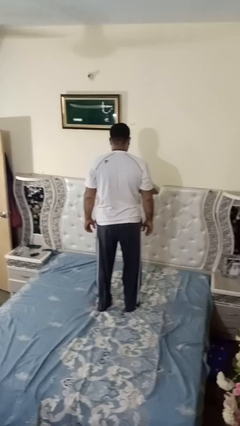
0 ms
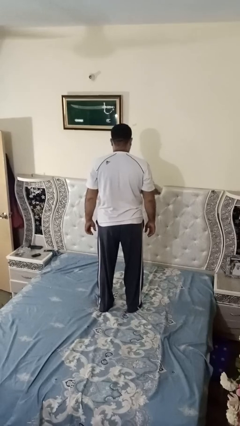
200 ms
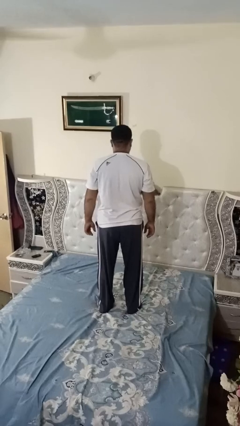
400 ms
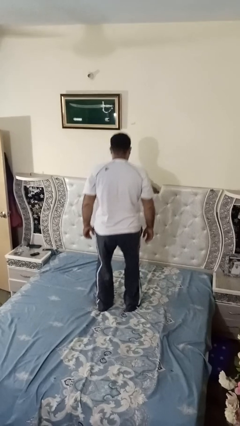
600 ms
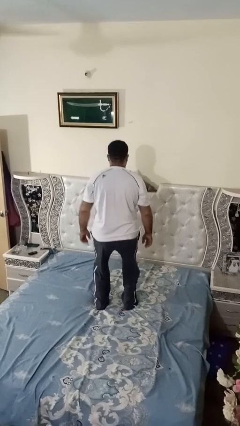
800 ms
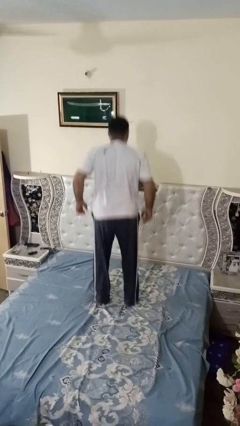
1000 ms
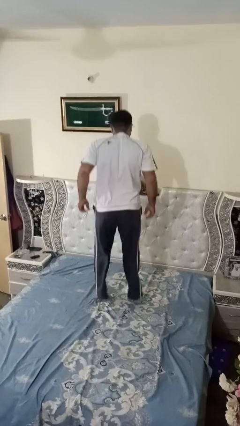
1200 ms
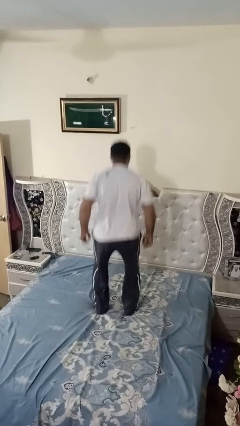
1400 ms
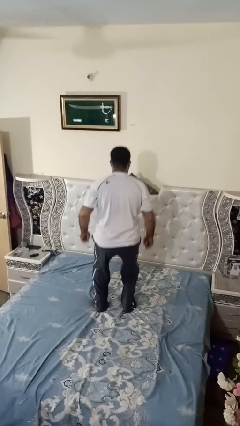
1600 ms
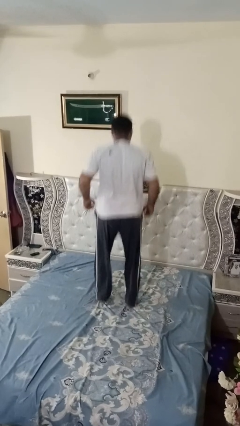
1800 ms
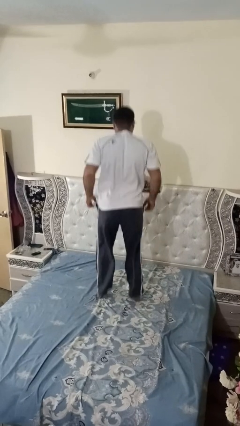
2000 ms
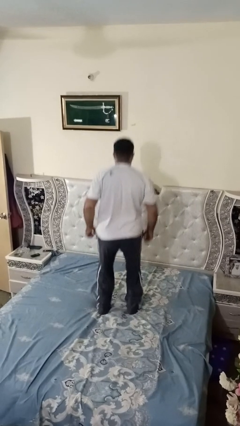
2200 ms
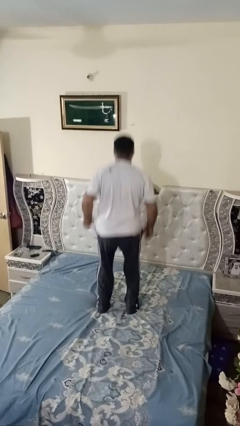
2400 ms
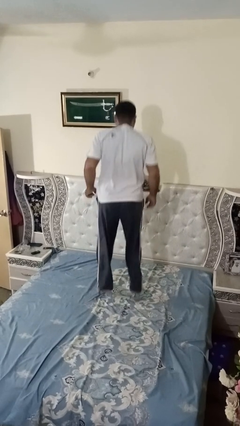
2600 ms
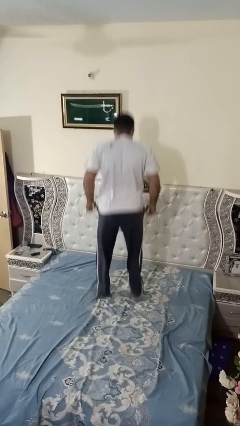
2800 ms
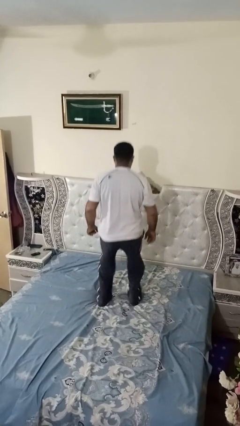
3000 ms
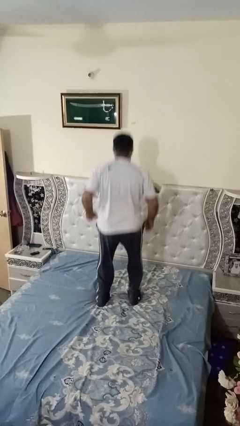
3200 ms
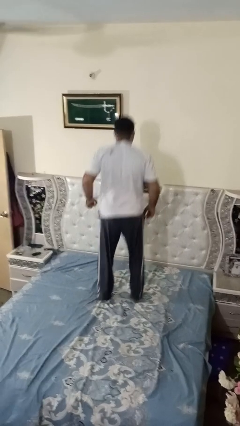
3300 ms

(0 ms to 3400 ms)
person jumps on bed

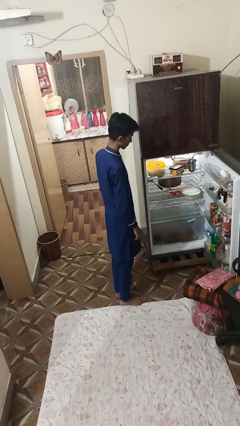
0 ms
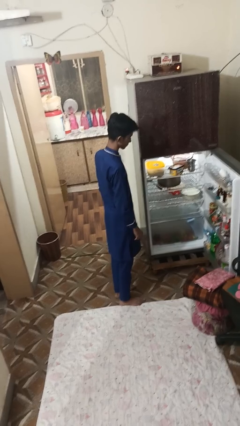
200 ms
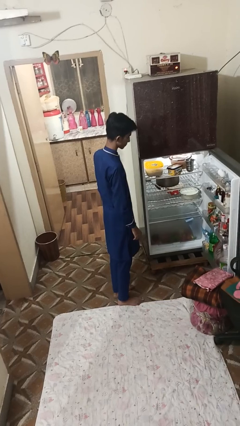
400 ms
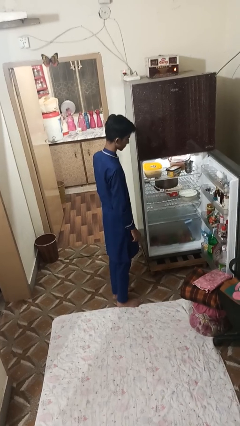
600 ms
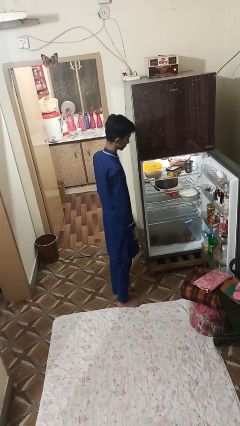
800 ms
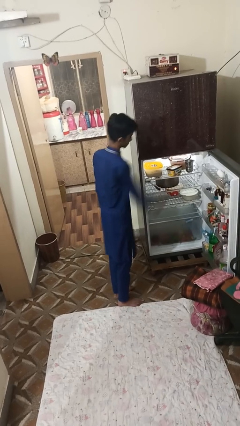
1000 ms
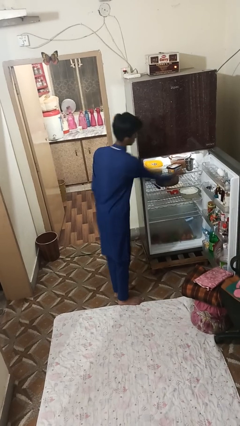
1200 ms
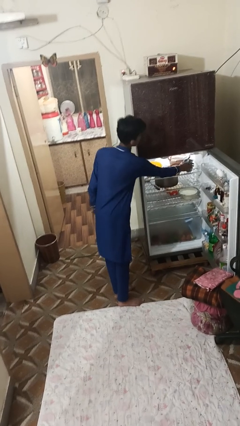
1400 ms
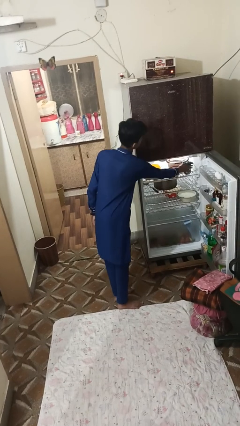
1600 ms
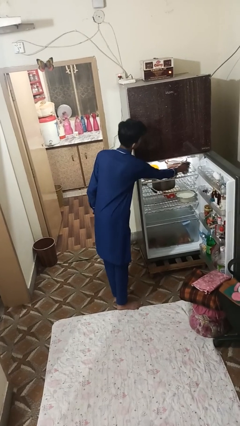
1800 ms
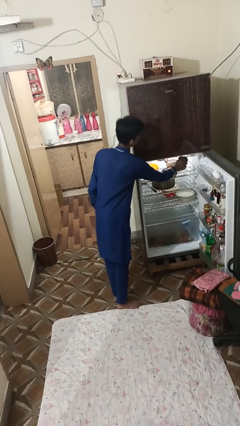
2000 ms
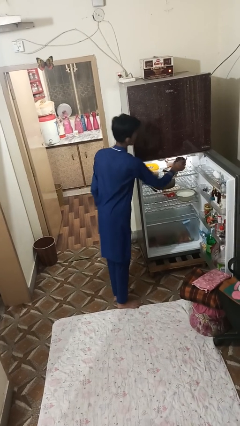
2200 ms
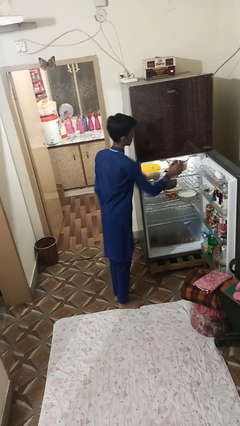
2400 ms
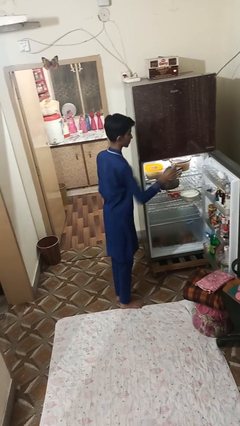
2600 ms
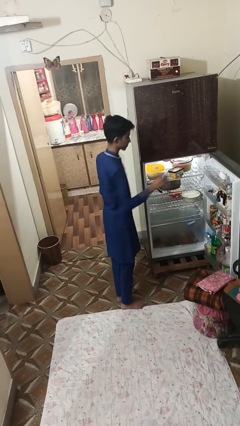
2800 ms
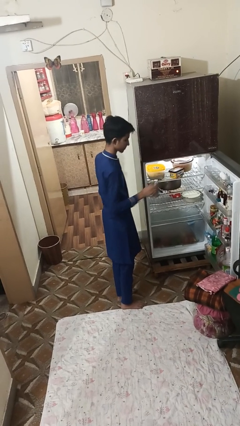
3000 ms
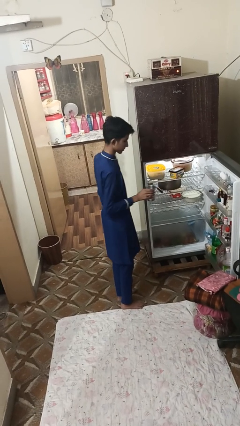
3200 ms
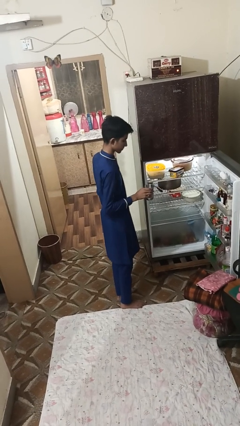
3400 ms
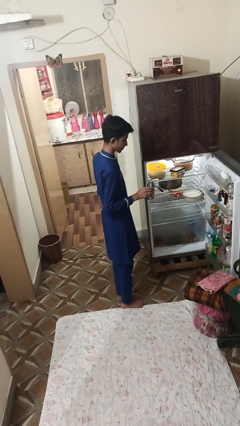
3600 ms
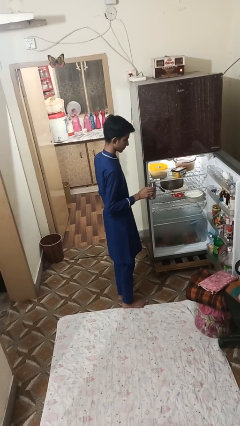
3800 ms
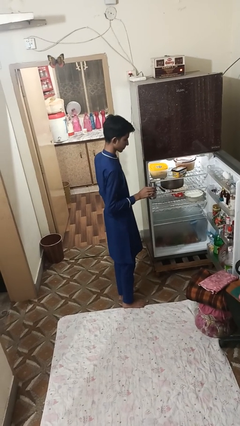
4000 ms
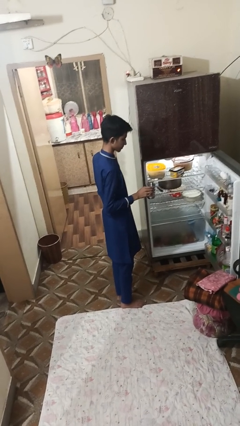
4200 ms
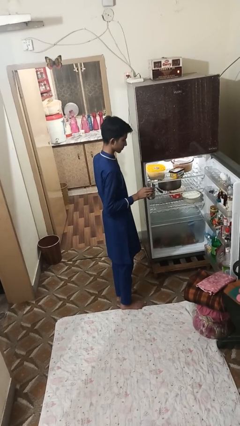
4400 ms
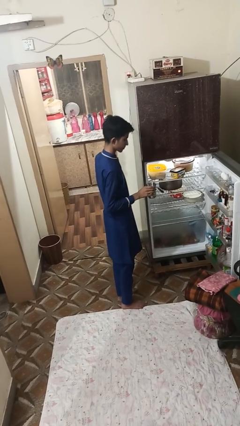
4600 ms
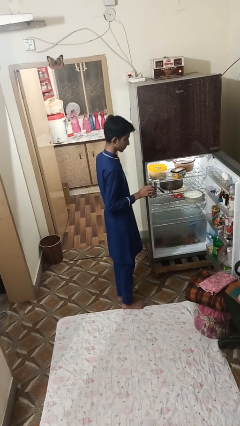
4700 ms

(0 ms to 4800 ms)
person takes object from refrigerator

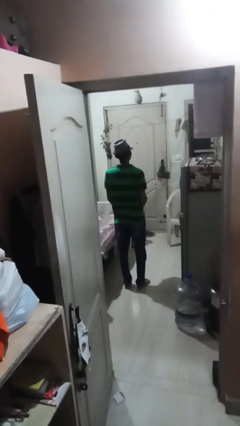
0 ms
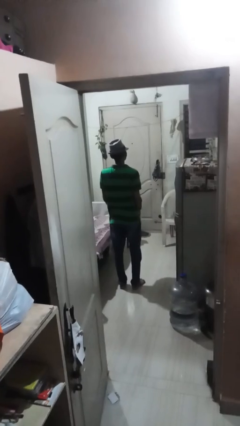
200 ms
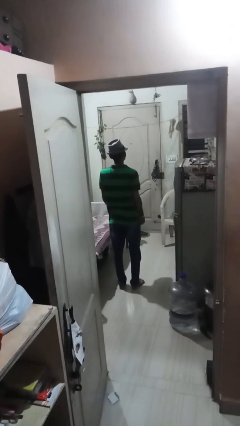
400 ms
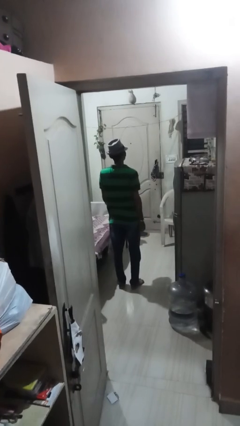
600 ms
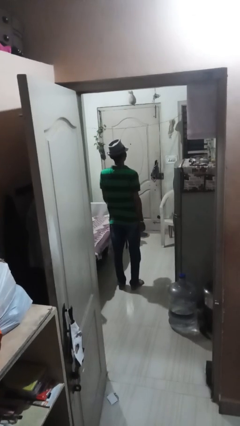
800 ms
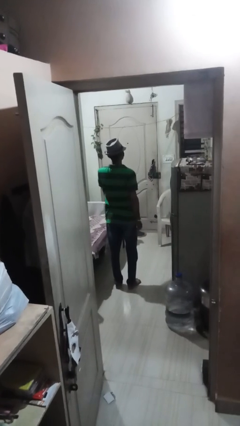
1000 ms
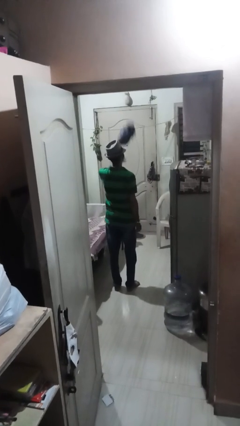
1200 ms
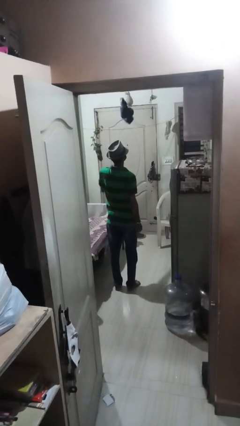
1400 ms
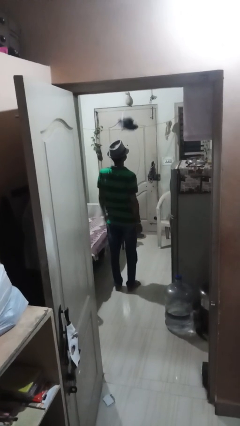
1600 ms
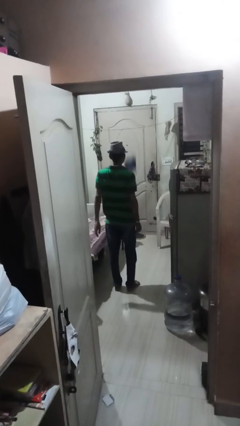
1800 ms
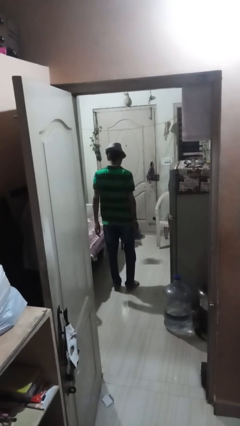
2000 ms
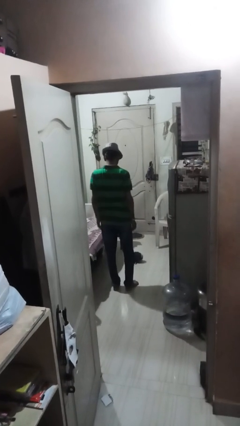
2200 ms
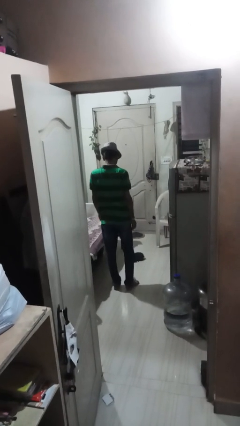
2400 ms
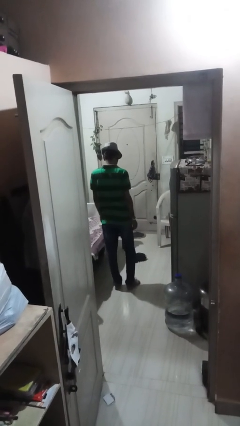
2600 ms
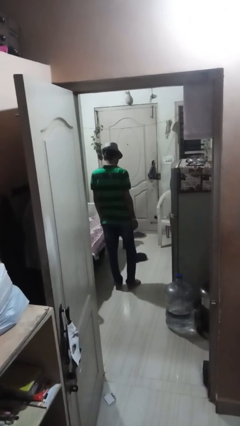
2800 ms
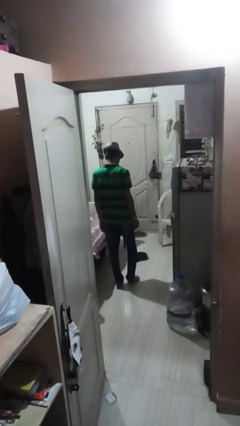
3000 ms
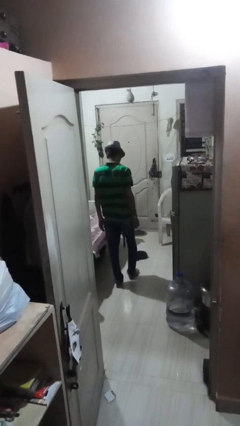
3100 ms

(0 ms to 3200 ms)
person throws object into air

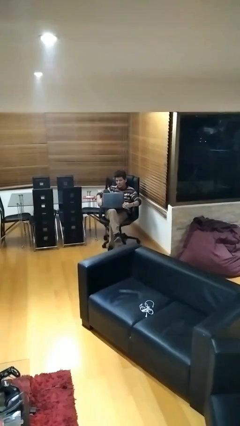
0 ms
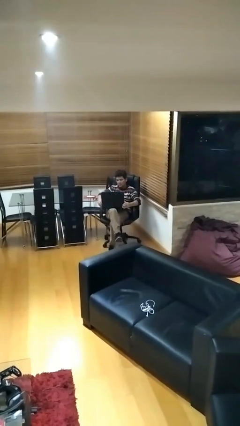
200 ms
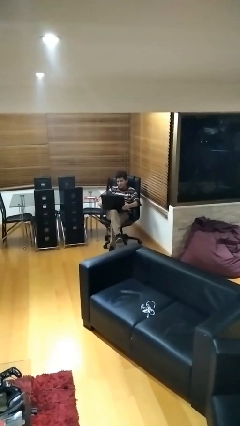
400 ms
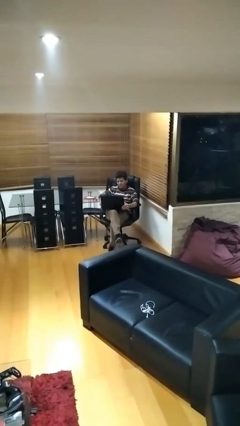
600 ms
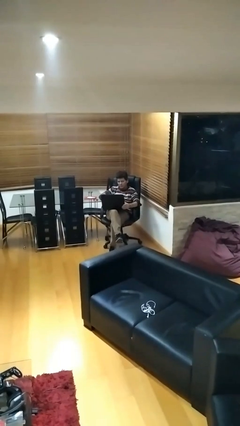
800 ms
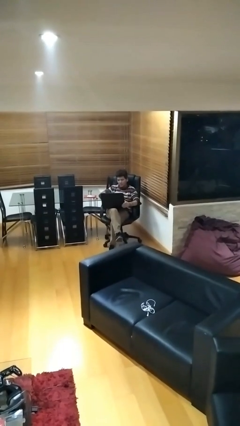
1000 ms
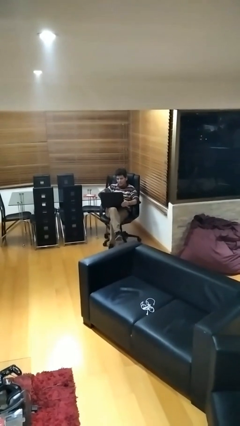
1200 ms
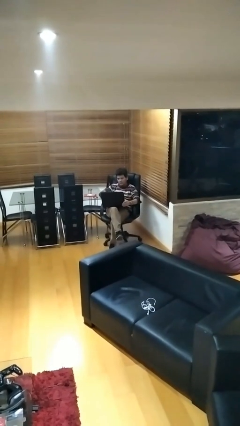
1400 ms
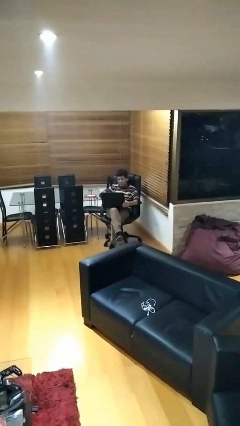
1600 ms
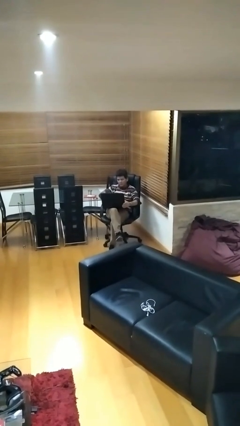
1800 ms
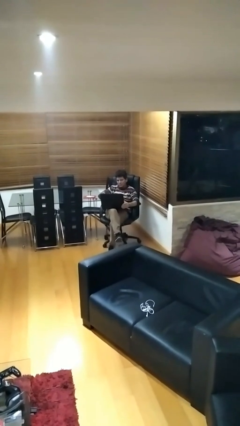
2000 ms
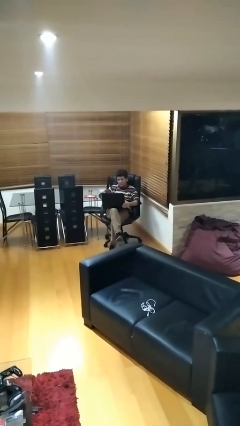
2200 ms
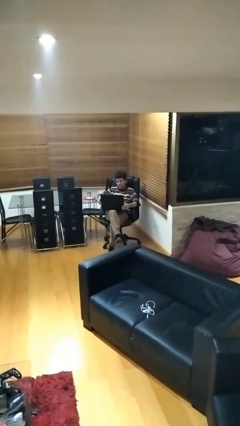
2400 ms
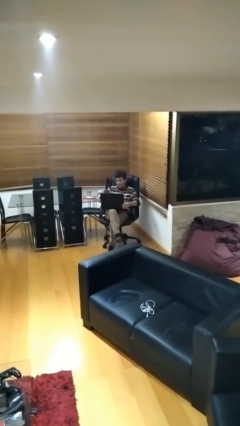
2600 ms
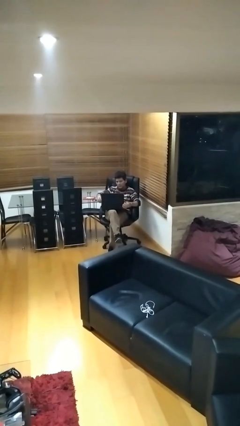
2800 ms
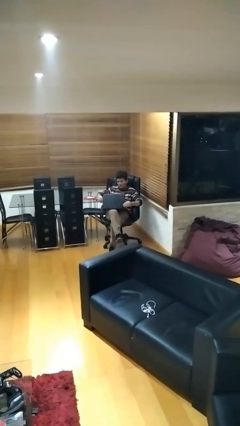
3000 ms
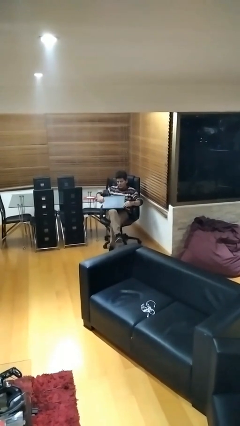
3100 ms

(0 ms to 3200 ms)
person interacts with laptop

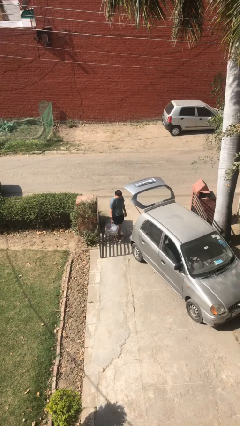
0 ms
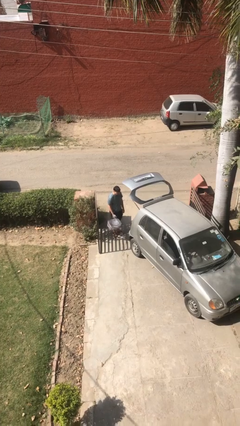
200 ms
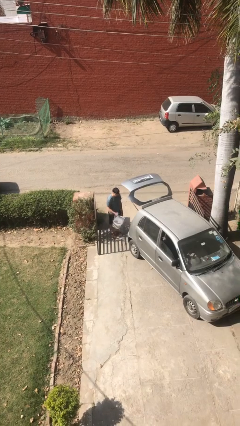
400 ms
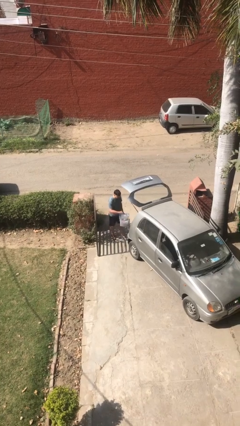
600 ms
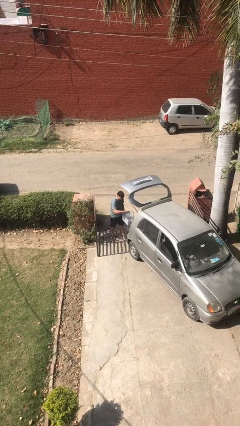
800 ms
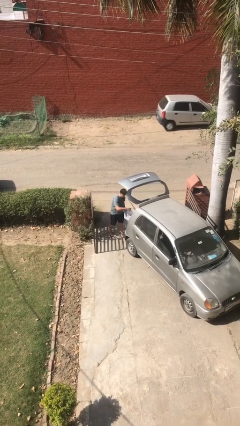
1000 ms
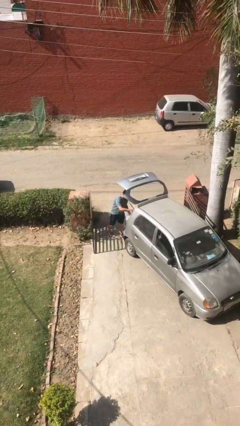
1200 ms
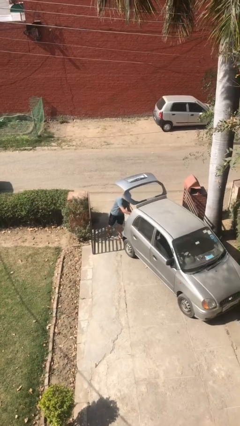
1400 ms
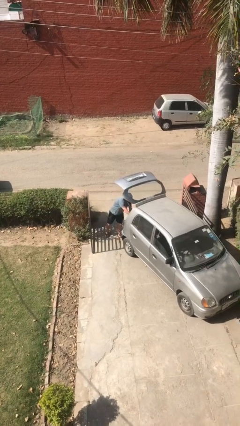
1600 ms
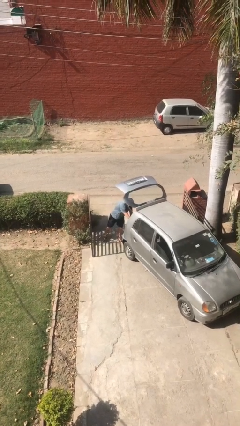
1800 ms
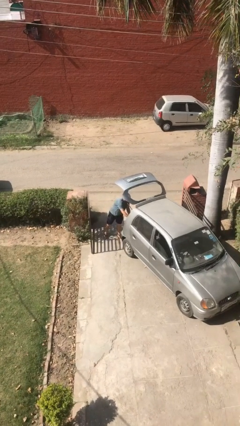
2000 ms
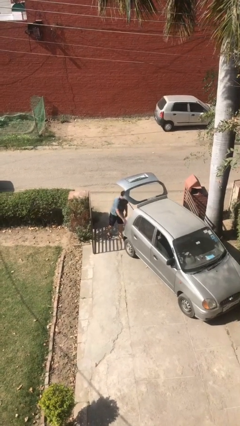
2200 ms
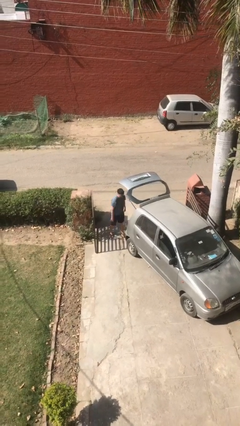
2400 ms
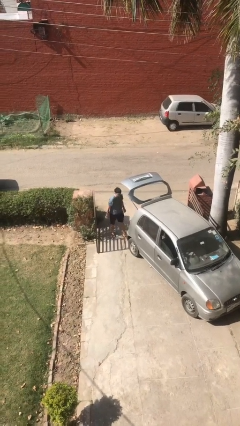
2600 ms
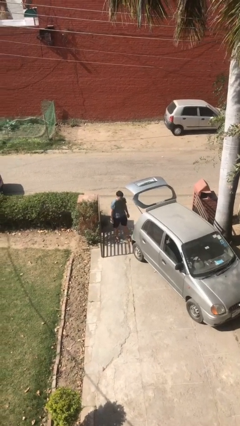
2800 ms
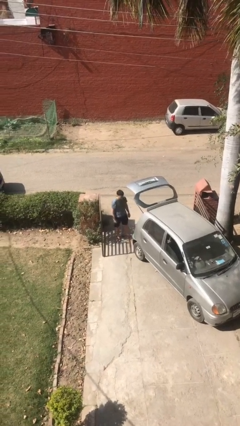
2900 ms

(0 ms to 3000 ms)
person loads car

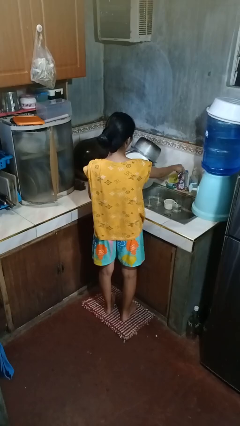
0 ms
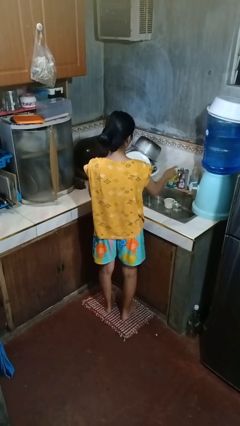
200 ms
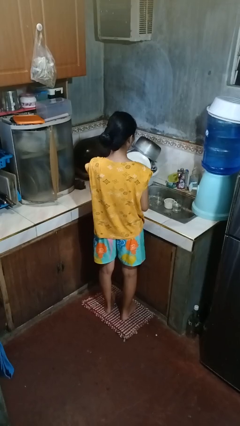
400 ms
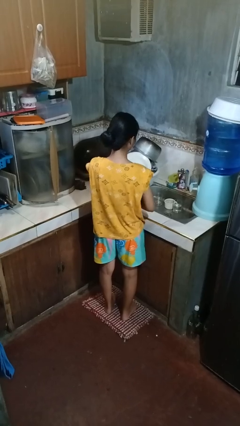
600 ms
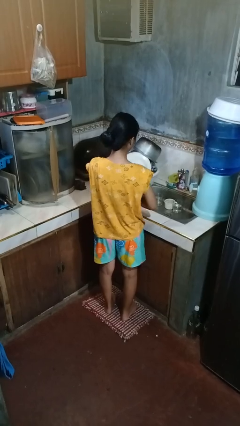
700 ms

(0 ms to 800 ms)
person turns off faucet
